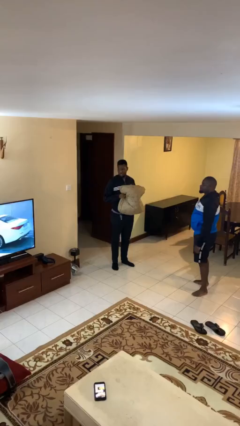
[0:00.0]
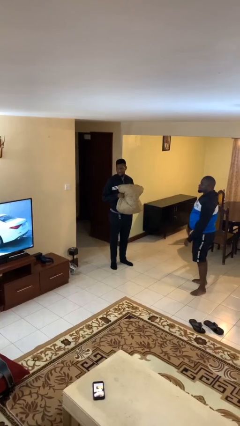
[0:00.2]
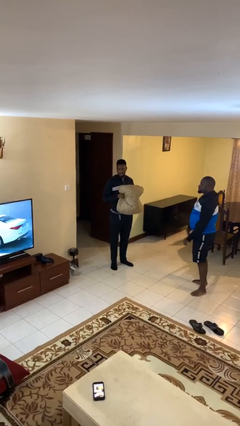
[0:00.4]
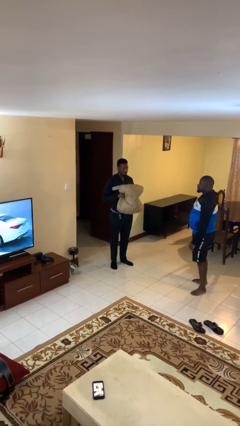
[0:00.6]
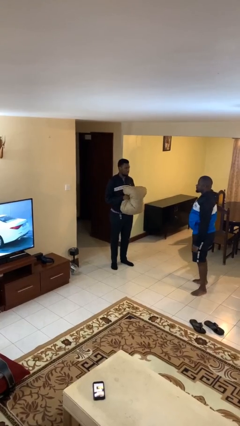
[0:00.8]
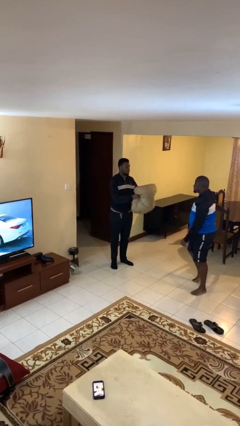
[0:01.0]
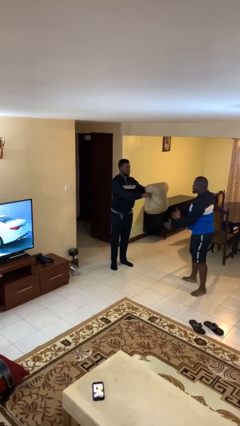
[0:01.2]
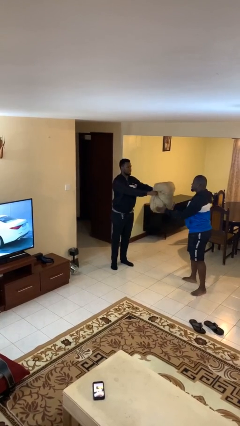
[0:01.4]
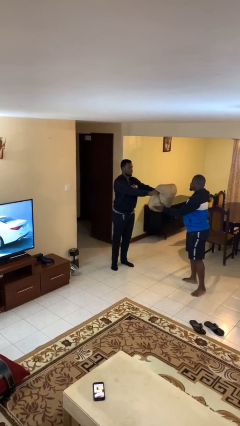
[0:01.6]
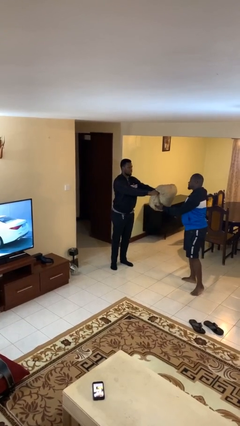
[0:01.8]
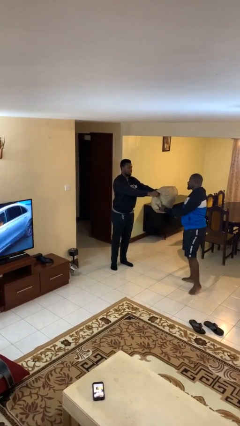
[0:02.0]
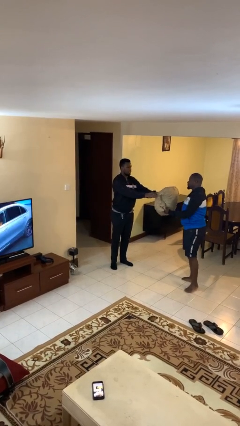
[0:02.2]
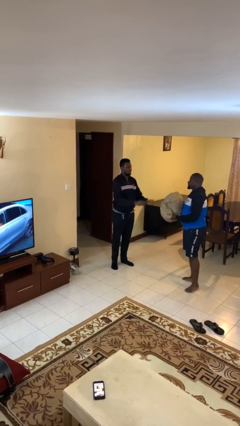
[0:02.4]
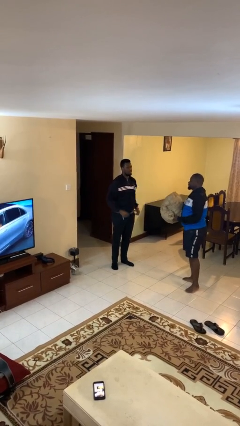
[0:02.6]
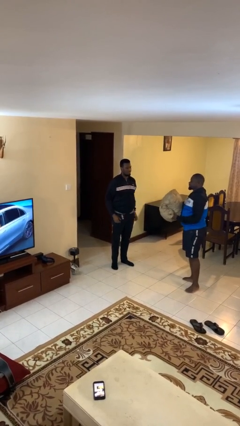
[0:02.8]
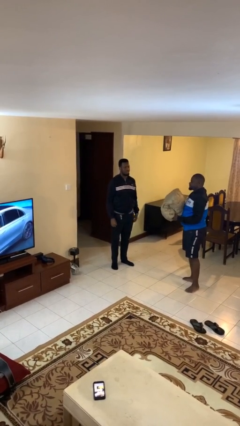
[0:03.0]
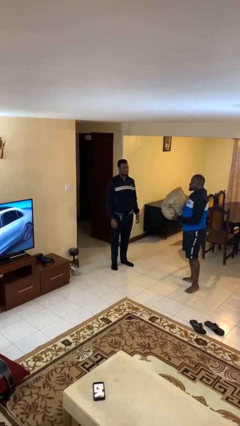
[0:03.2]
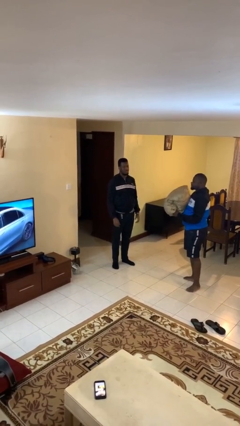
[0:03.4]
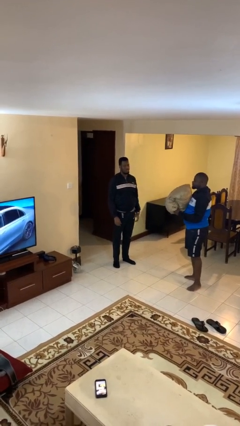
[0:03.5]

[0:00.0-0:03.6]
person transfers object to person

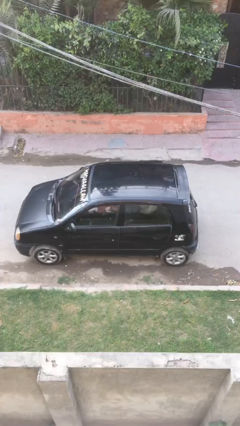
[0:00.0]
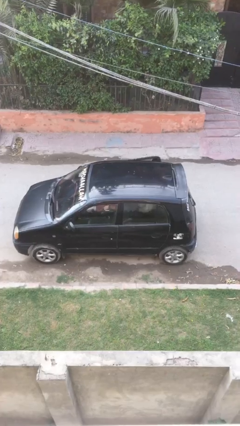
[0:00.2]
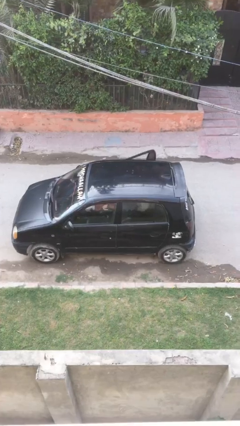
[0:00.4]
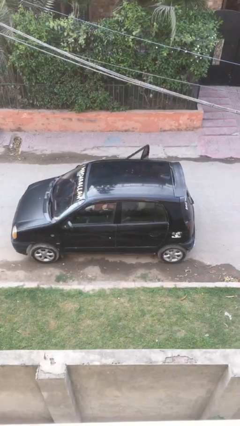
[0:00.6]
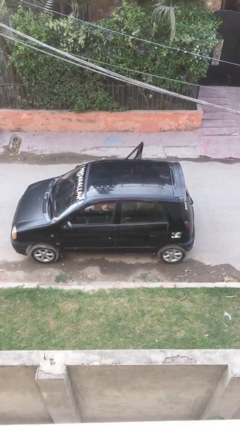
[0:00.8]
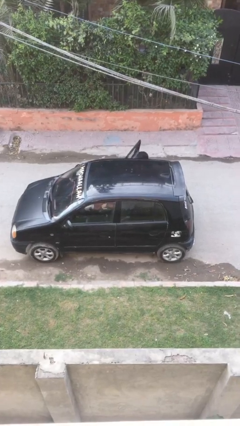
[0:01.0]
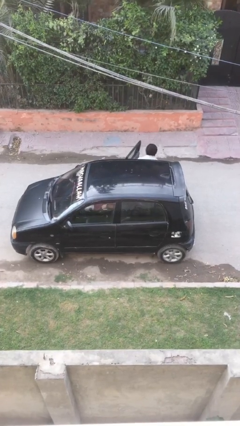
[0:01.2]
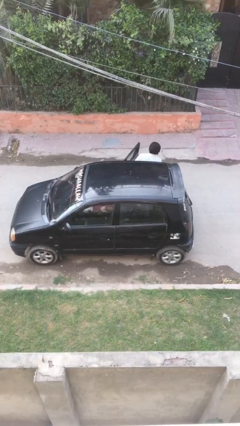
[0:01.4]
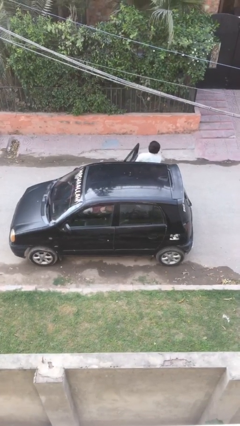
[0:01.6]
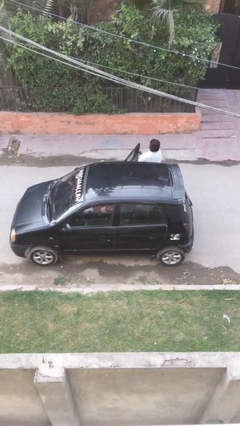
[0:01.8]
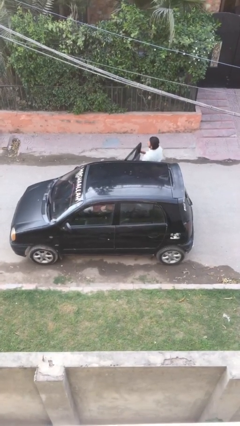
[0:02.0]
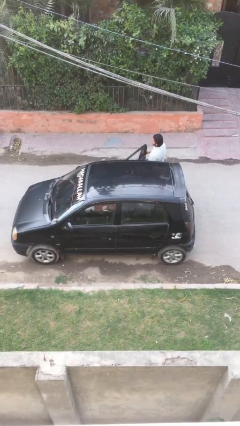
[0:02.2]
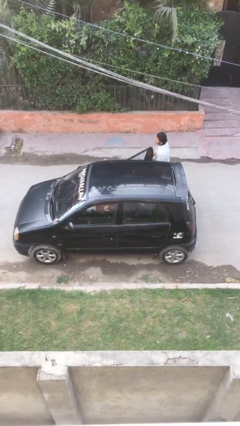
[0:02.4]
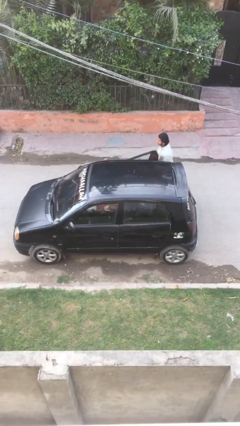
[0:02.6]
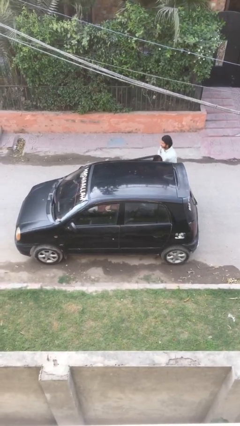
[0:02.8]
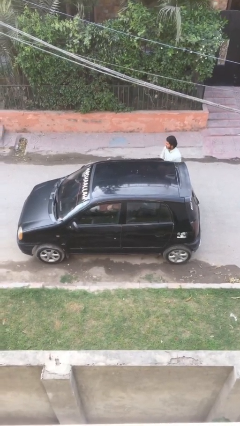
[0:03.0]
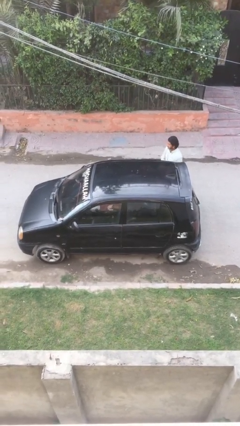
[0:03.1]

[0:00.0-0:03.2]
car drops off person

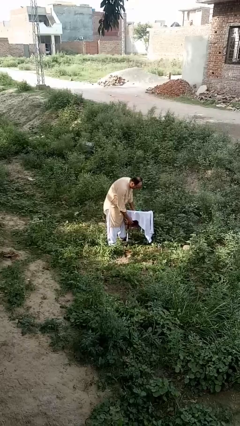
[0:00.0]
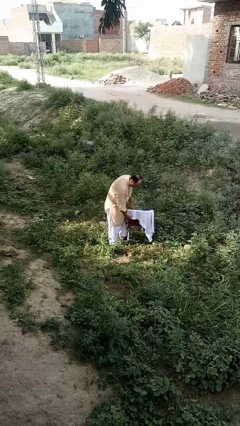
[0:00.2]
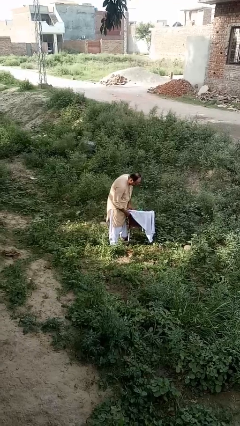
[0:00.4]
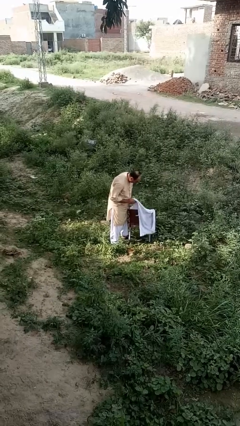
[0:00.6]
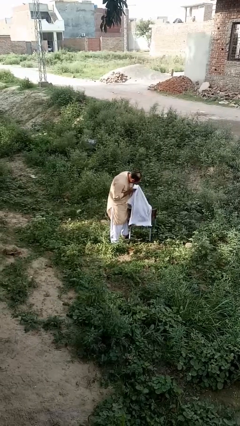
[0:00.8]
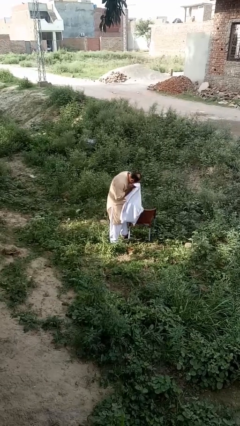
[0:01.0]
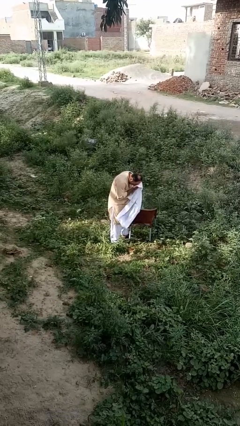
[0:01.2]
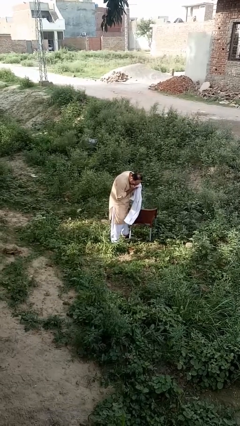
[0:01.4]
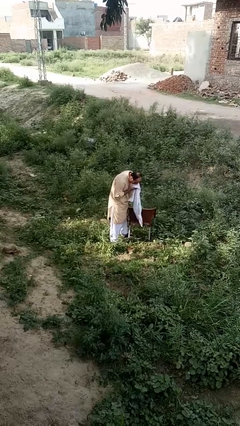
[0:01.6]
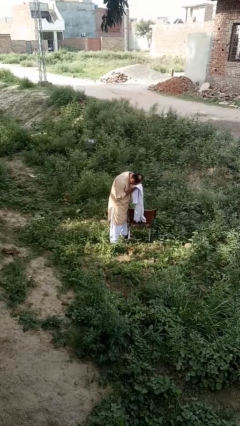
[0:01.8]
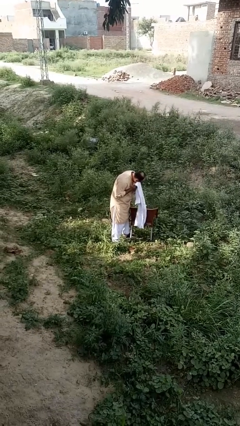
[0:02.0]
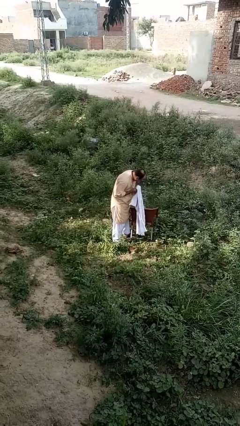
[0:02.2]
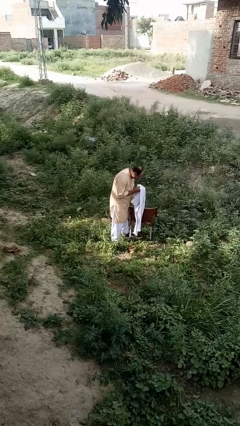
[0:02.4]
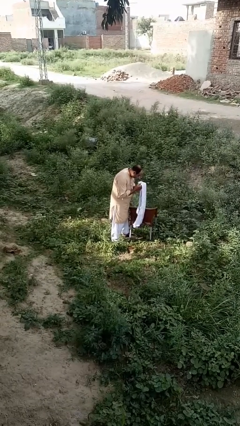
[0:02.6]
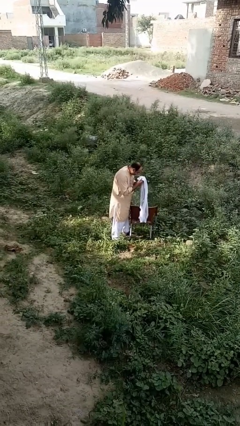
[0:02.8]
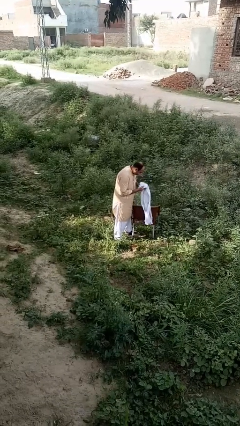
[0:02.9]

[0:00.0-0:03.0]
person dries face with towel

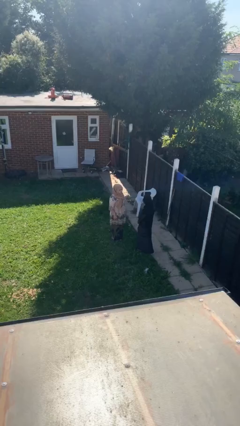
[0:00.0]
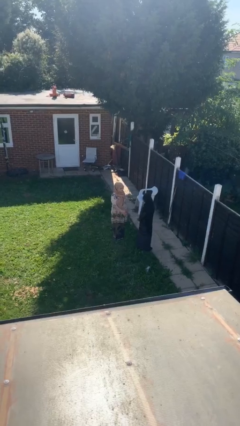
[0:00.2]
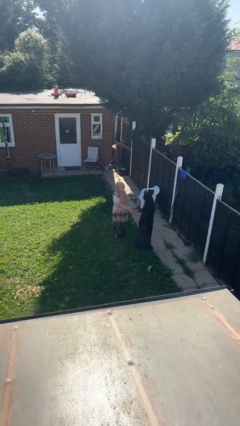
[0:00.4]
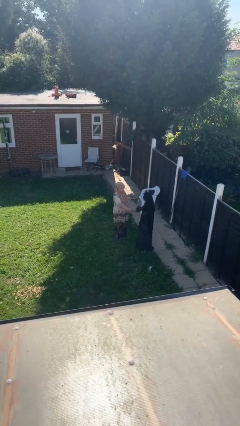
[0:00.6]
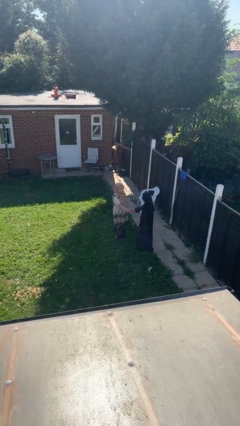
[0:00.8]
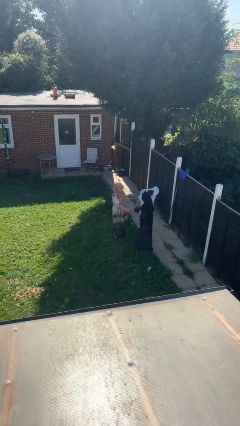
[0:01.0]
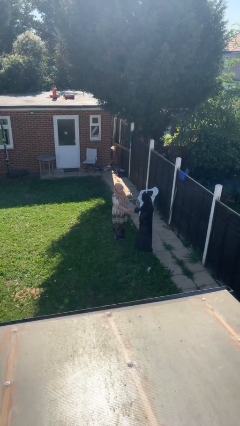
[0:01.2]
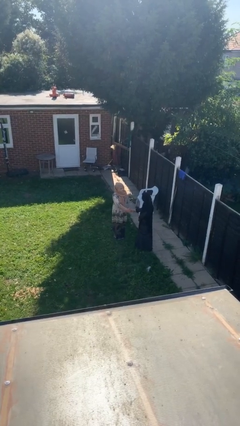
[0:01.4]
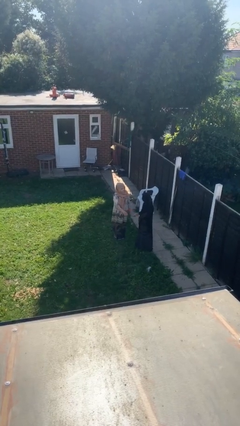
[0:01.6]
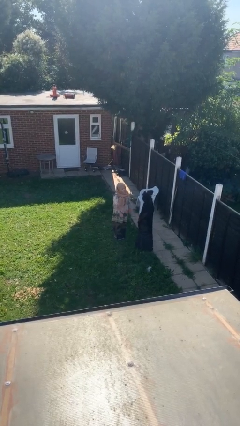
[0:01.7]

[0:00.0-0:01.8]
person shakes hand

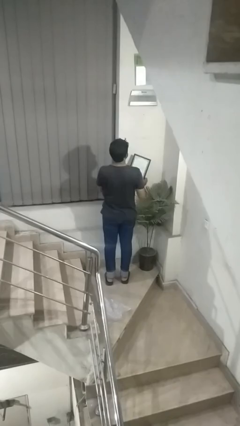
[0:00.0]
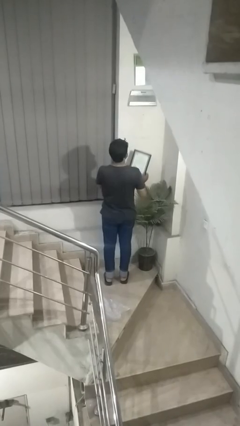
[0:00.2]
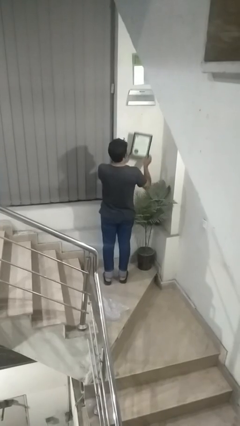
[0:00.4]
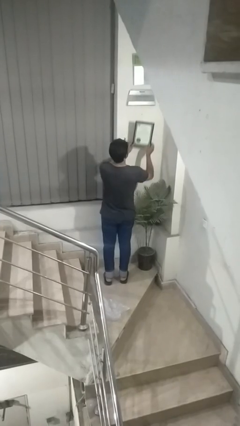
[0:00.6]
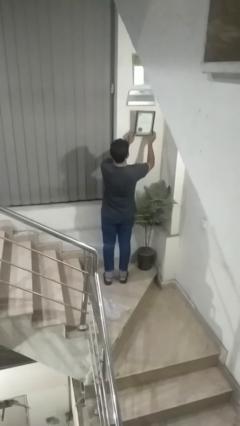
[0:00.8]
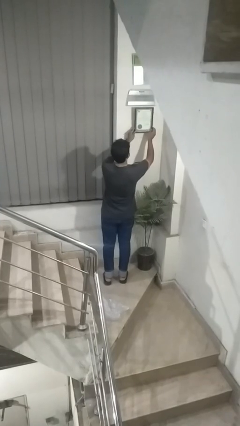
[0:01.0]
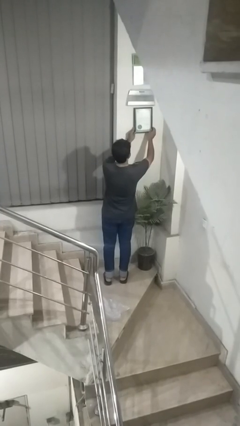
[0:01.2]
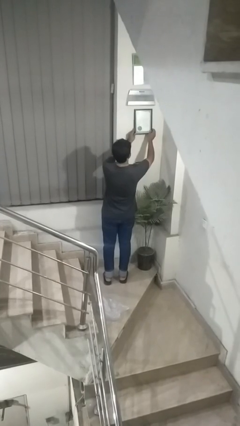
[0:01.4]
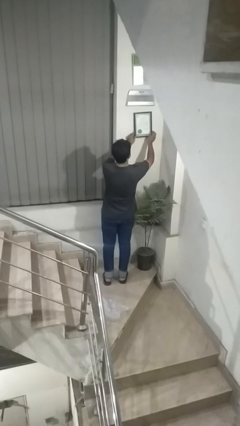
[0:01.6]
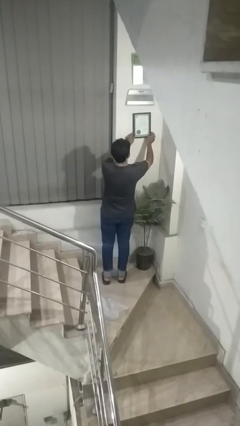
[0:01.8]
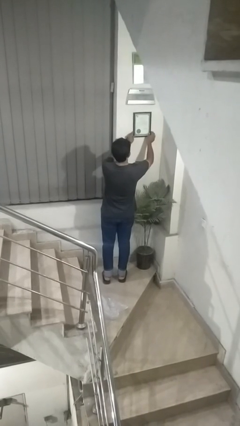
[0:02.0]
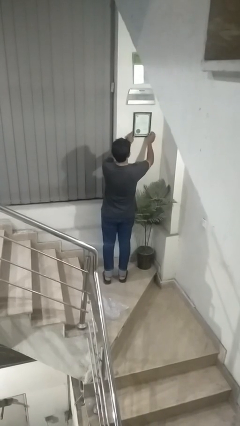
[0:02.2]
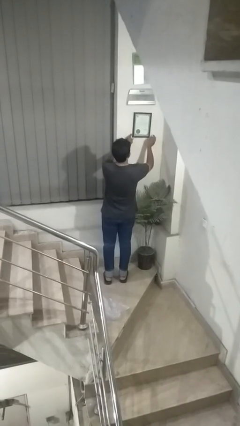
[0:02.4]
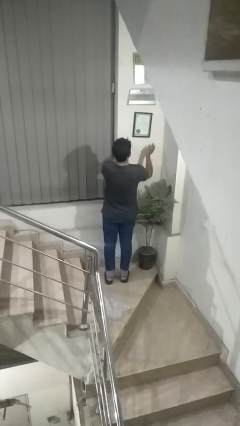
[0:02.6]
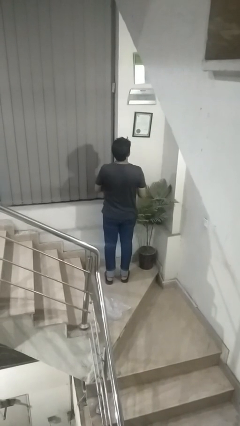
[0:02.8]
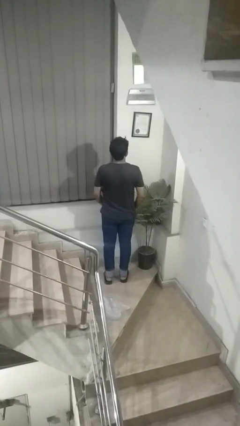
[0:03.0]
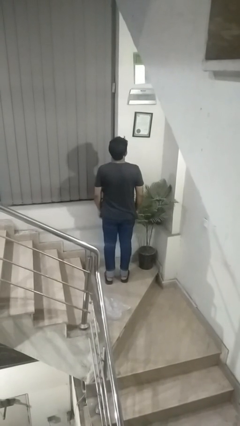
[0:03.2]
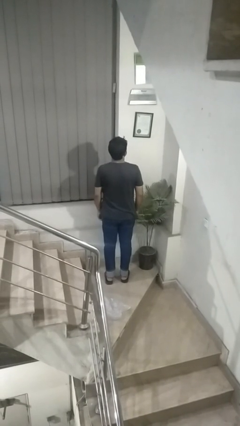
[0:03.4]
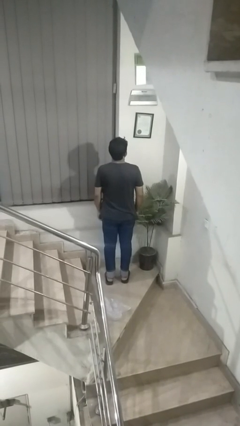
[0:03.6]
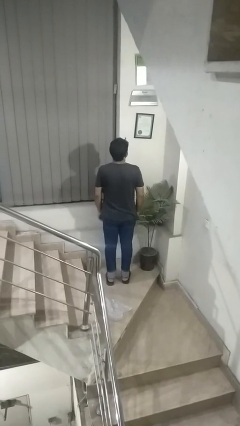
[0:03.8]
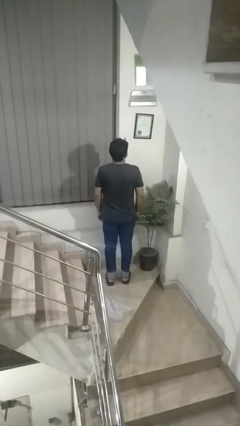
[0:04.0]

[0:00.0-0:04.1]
person puts up picture frame

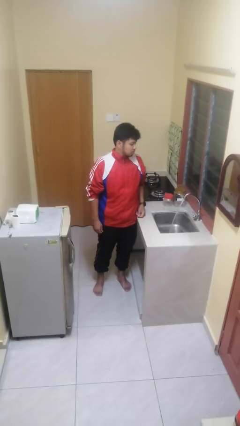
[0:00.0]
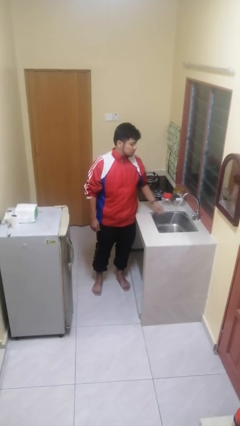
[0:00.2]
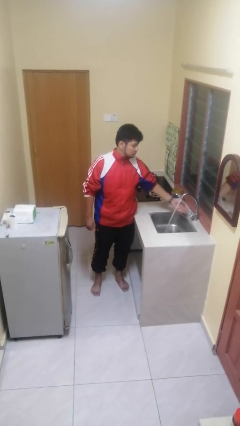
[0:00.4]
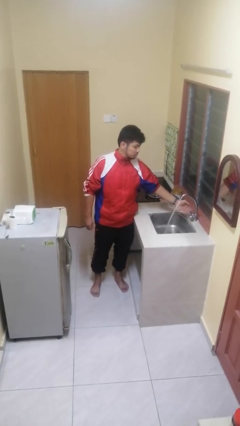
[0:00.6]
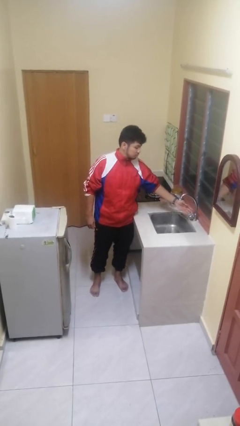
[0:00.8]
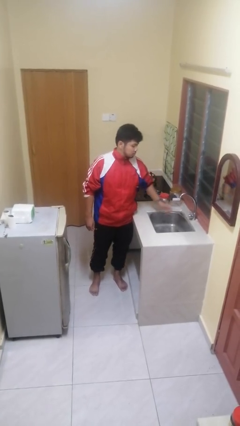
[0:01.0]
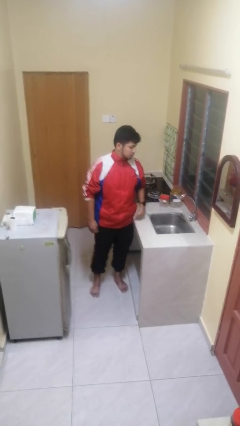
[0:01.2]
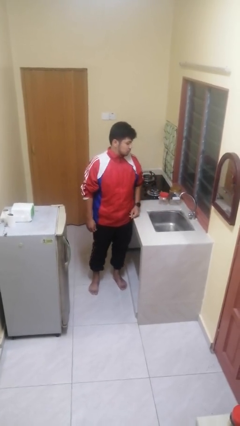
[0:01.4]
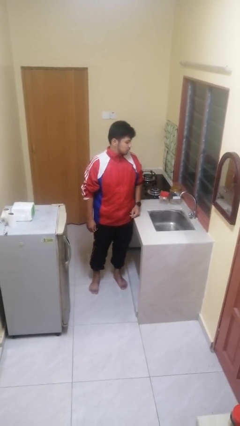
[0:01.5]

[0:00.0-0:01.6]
person turns off faucet

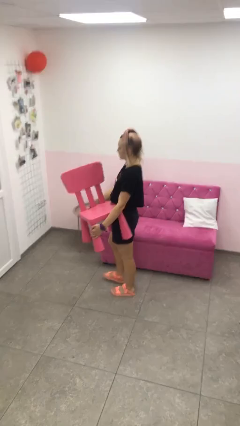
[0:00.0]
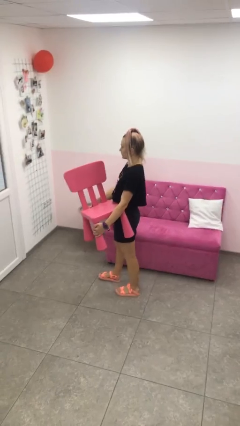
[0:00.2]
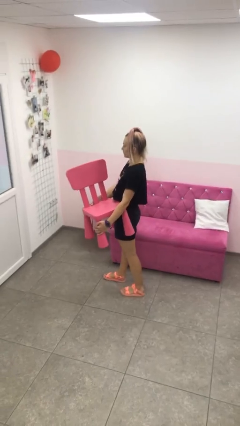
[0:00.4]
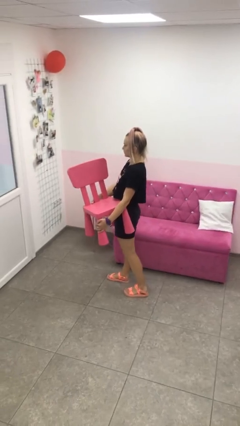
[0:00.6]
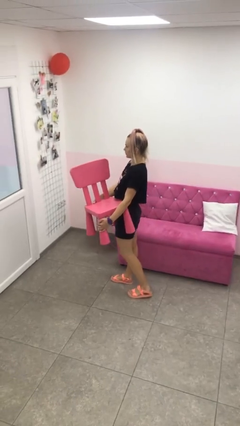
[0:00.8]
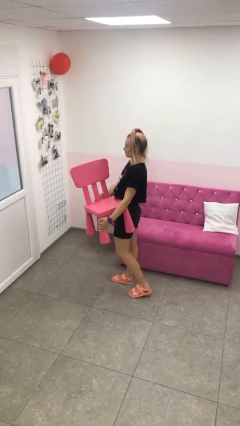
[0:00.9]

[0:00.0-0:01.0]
person carries furniture
